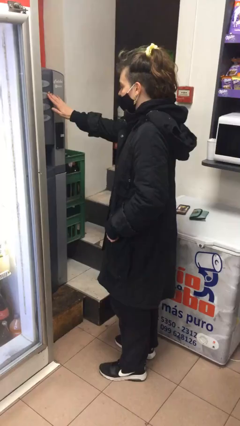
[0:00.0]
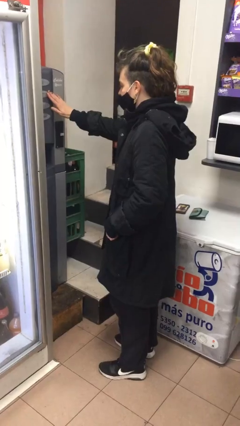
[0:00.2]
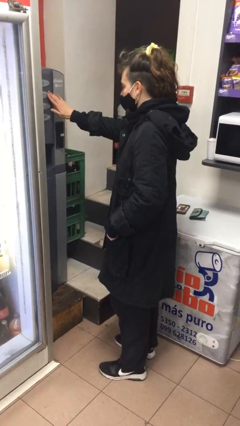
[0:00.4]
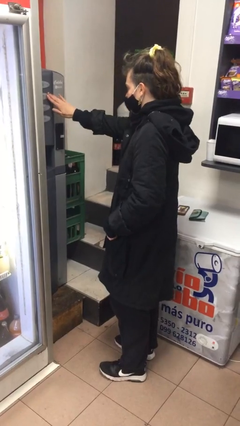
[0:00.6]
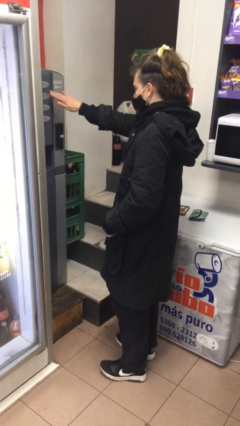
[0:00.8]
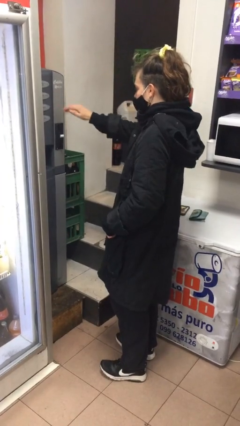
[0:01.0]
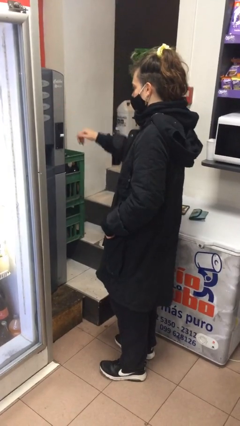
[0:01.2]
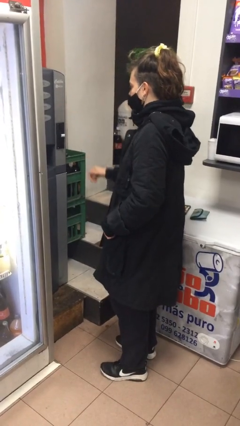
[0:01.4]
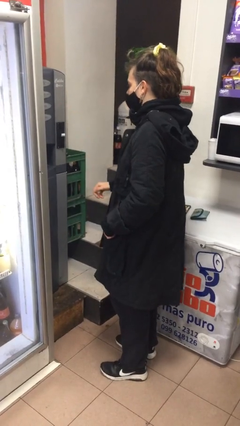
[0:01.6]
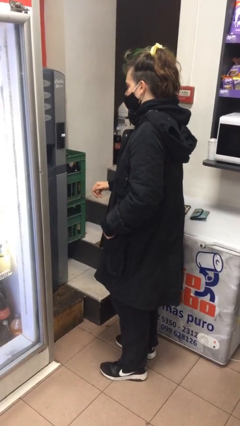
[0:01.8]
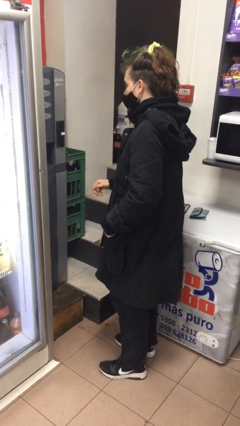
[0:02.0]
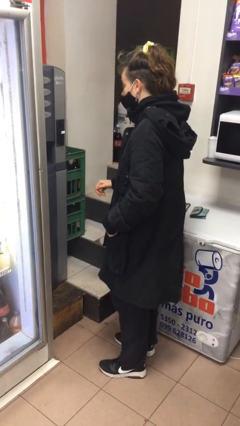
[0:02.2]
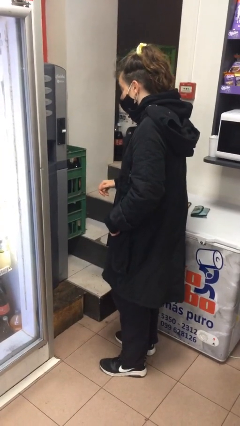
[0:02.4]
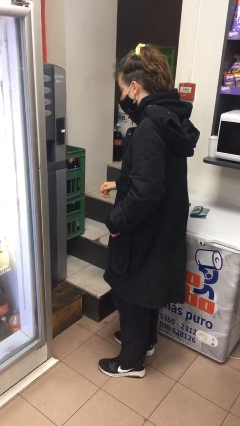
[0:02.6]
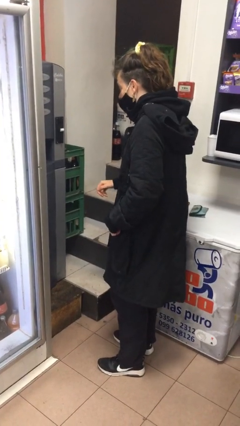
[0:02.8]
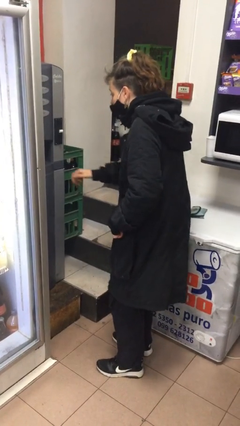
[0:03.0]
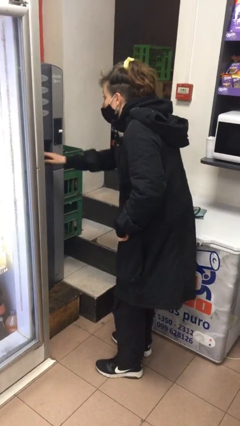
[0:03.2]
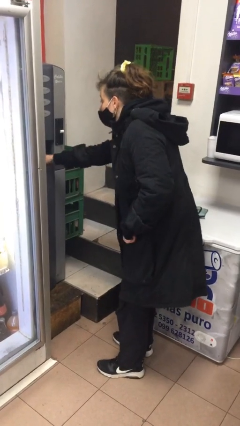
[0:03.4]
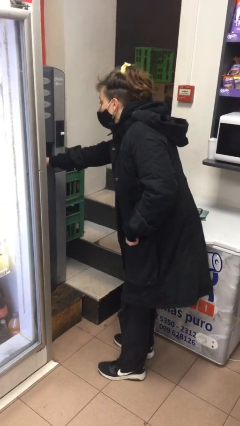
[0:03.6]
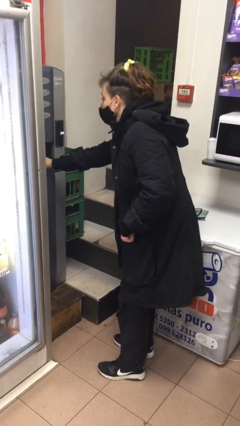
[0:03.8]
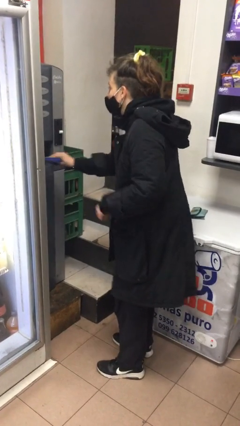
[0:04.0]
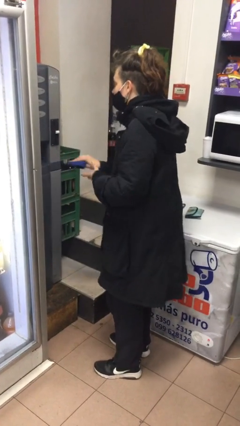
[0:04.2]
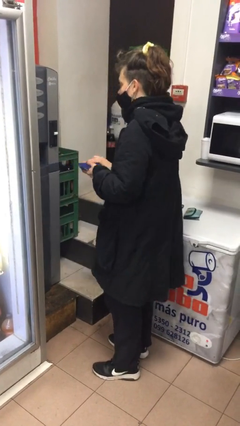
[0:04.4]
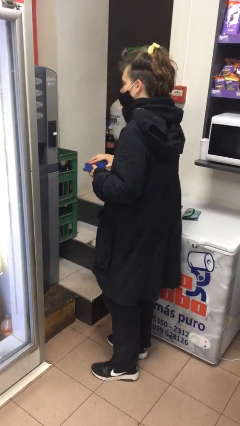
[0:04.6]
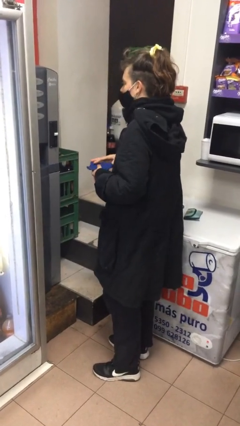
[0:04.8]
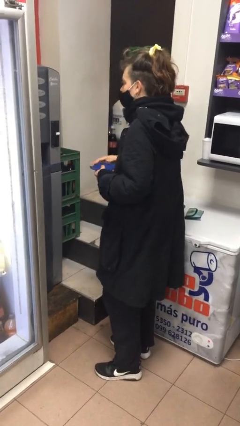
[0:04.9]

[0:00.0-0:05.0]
person purchases from machine

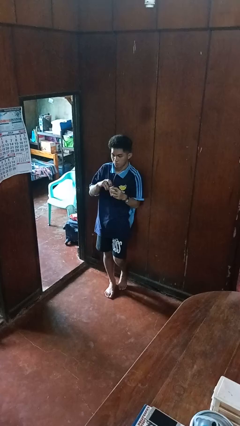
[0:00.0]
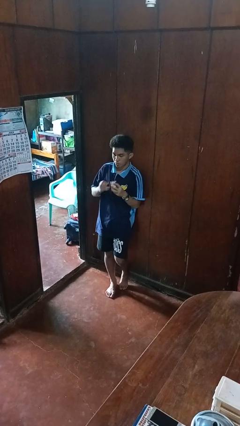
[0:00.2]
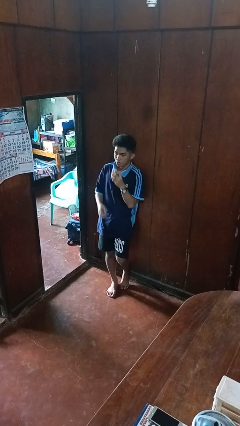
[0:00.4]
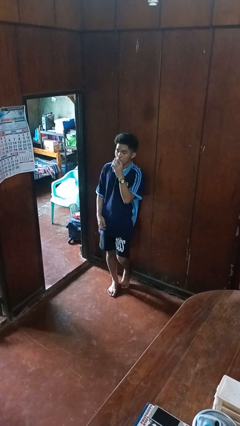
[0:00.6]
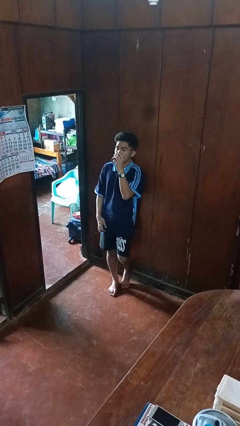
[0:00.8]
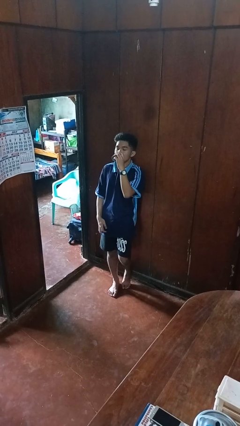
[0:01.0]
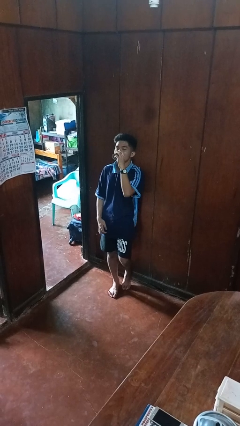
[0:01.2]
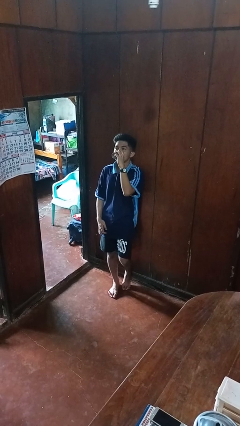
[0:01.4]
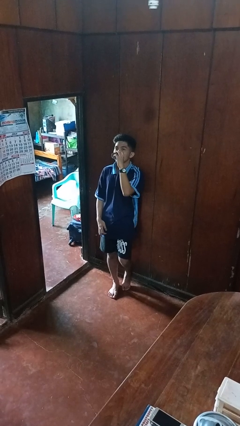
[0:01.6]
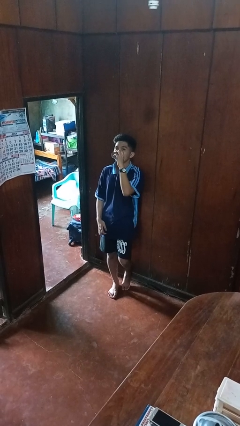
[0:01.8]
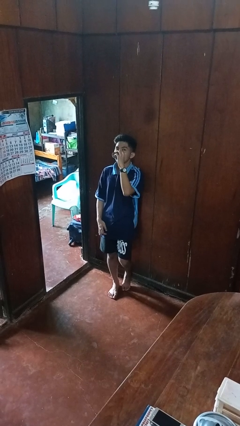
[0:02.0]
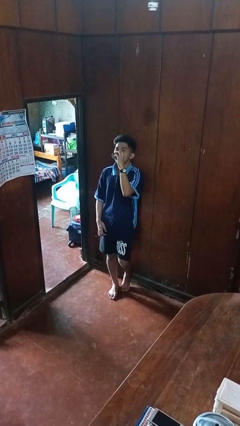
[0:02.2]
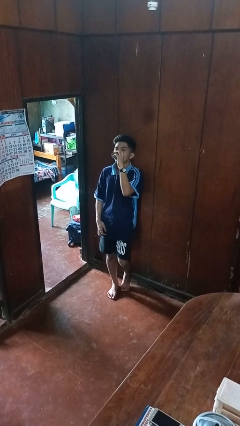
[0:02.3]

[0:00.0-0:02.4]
person drinks from beverage can

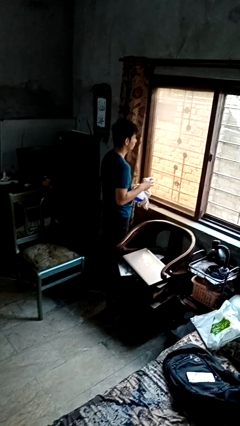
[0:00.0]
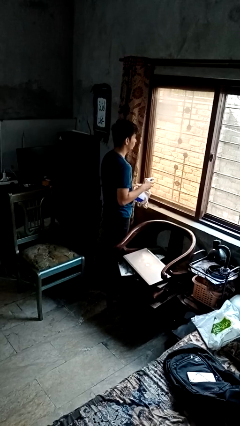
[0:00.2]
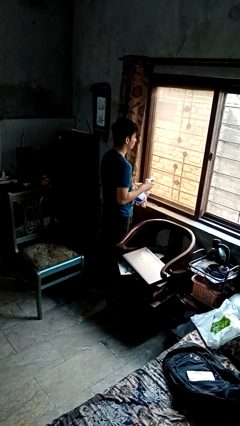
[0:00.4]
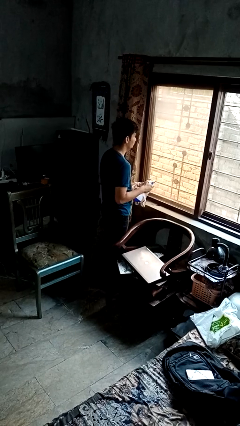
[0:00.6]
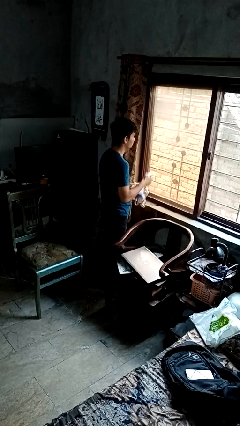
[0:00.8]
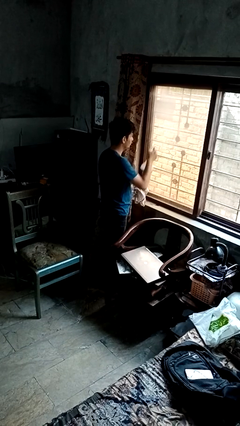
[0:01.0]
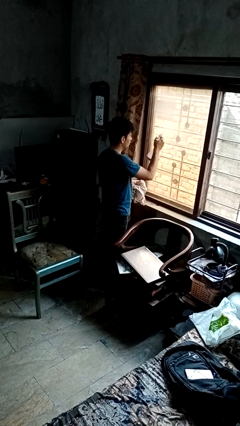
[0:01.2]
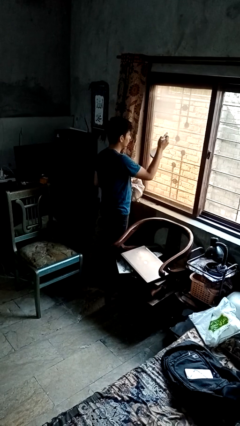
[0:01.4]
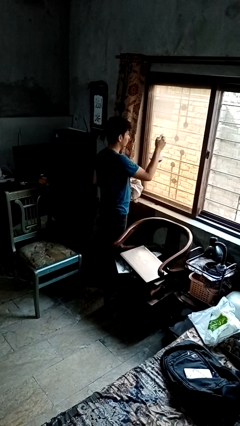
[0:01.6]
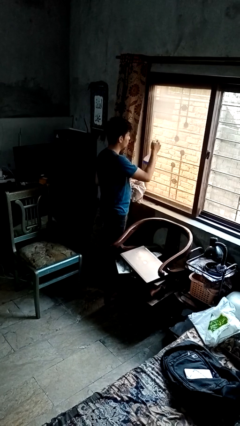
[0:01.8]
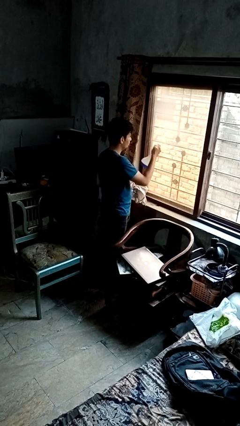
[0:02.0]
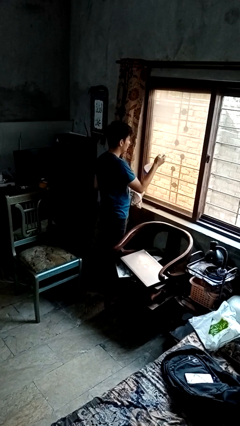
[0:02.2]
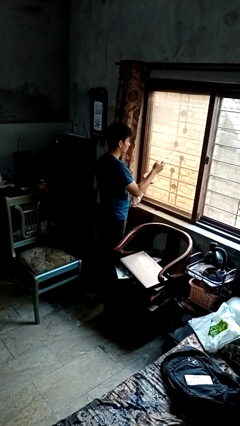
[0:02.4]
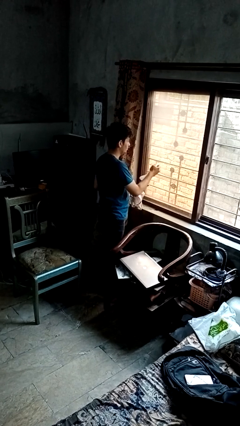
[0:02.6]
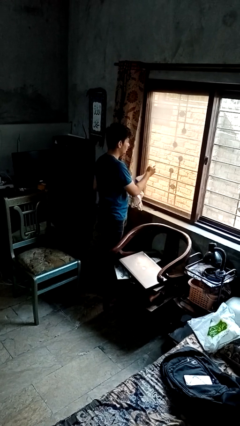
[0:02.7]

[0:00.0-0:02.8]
person sprays from bottle

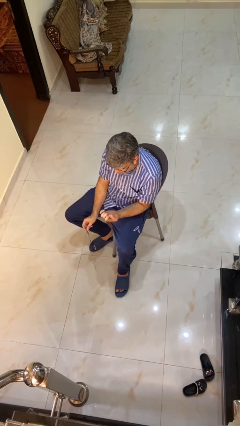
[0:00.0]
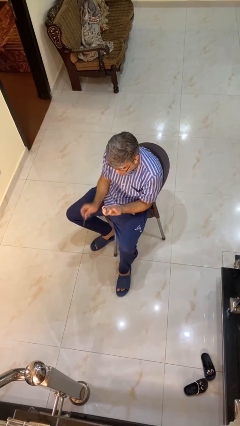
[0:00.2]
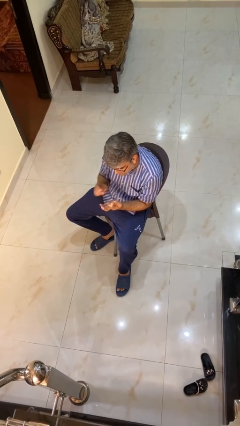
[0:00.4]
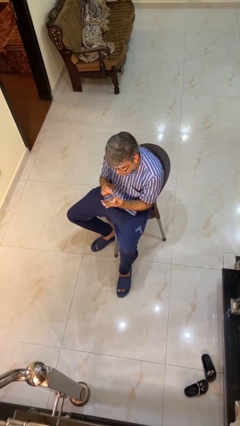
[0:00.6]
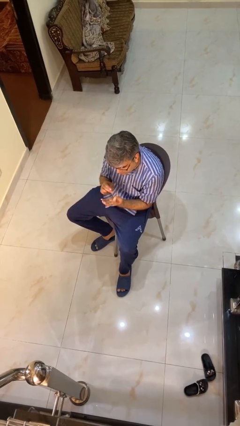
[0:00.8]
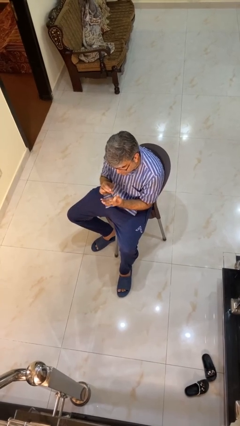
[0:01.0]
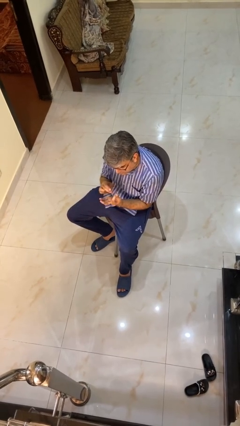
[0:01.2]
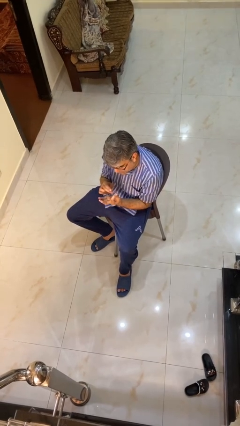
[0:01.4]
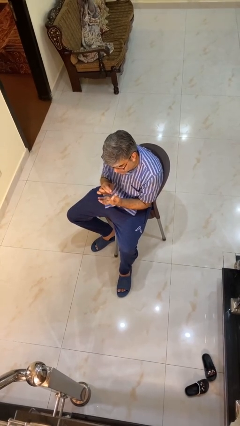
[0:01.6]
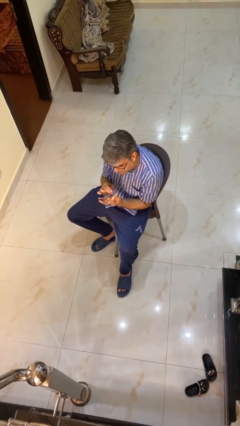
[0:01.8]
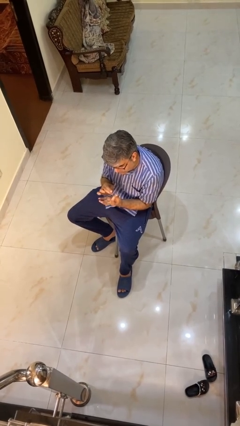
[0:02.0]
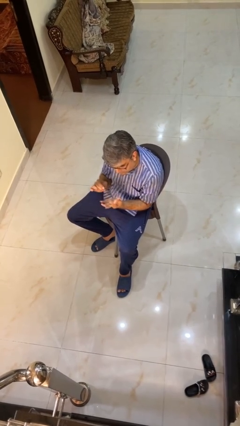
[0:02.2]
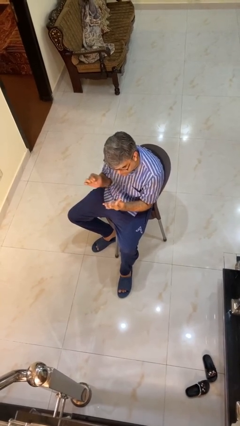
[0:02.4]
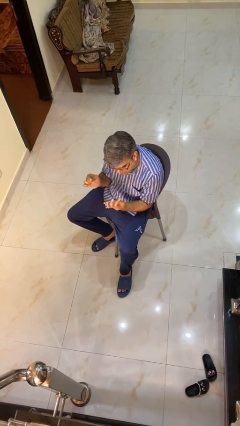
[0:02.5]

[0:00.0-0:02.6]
person files fingernails

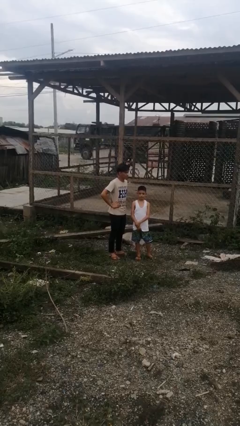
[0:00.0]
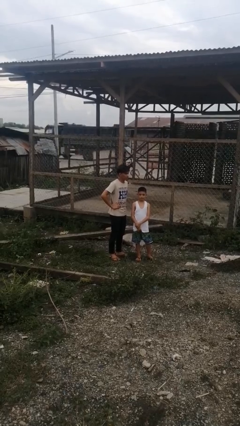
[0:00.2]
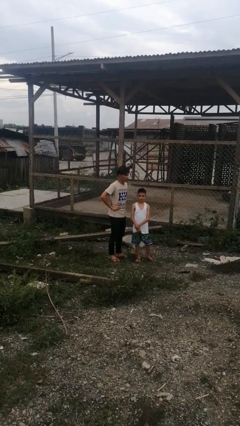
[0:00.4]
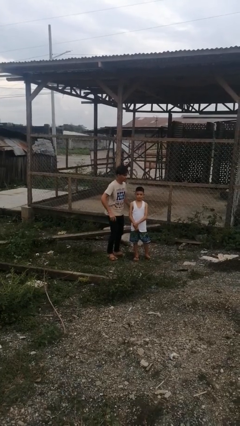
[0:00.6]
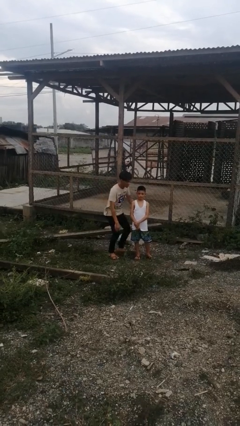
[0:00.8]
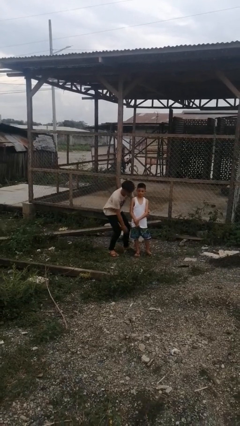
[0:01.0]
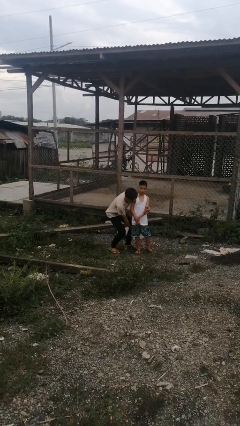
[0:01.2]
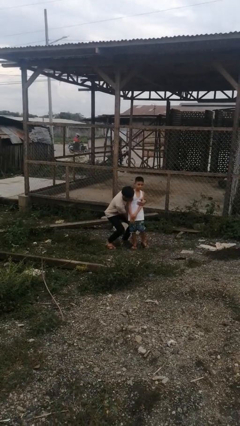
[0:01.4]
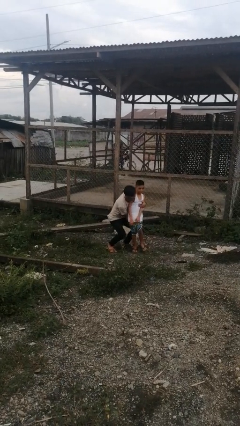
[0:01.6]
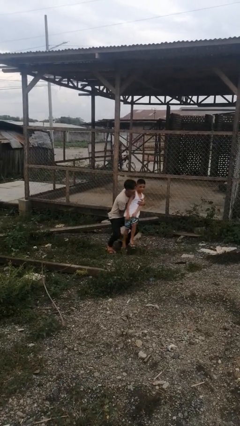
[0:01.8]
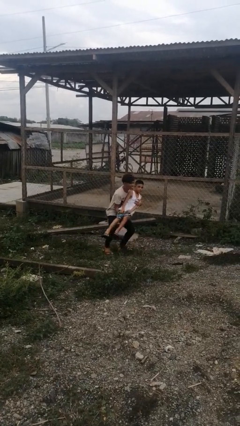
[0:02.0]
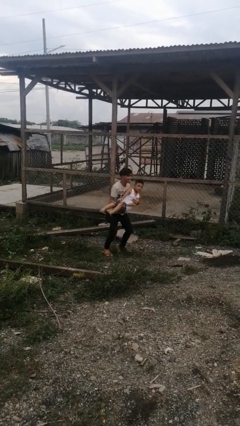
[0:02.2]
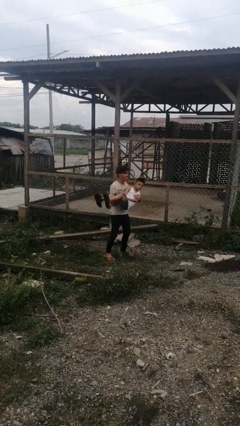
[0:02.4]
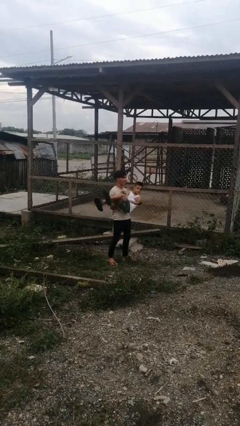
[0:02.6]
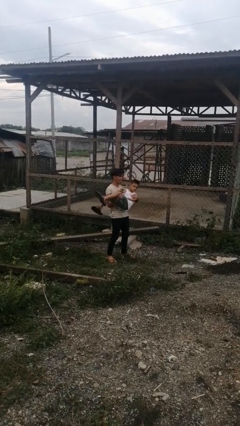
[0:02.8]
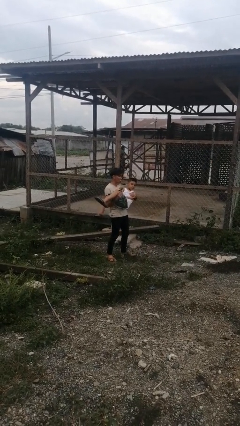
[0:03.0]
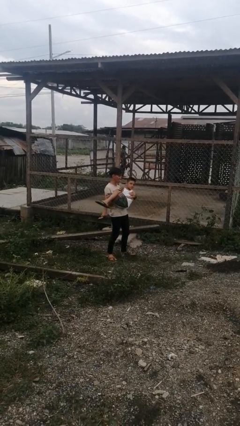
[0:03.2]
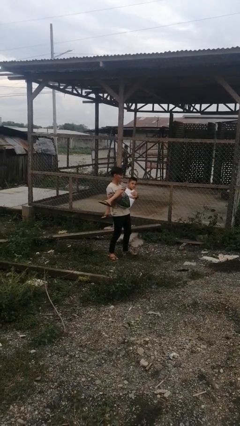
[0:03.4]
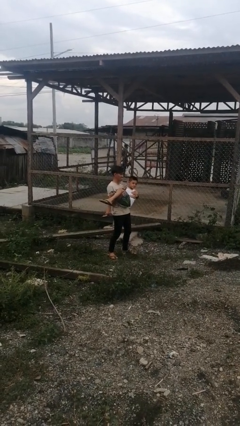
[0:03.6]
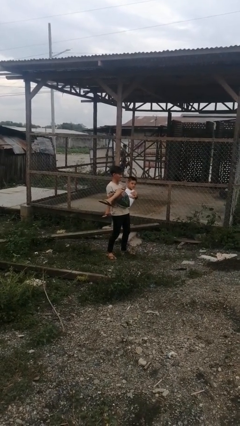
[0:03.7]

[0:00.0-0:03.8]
person picks up person

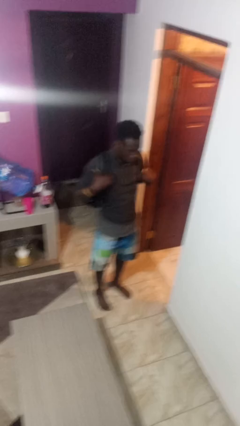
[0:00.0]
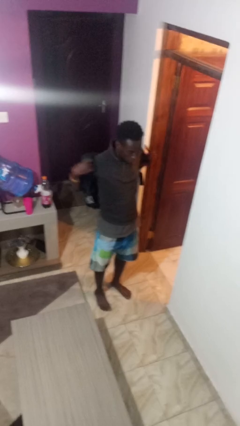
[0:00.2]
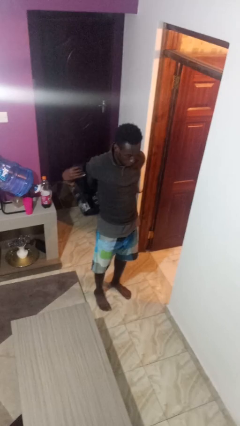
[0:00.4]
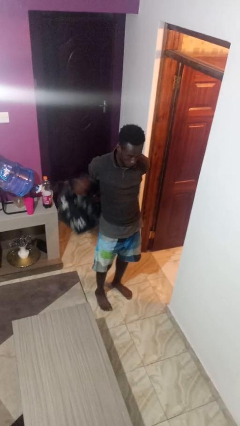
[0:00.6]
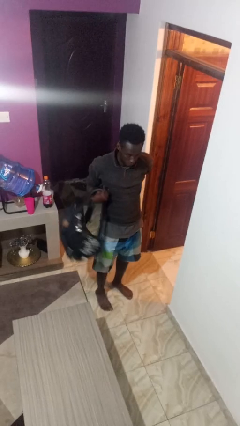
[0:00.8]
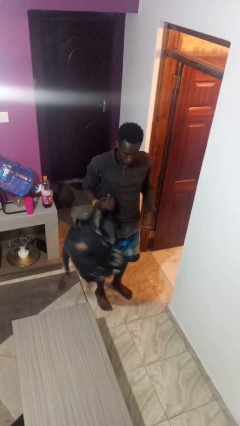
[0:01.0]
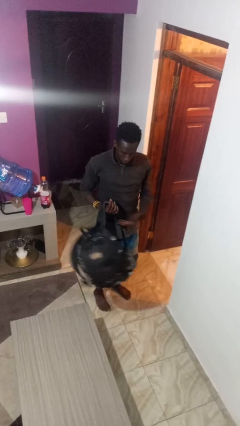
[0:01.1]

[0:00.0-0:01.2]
person takes off backpack
